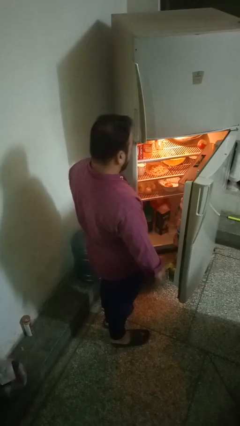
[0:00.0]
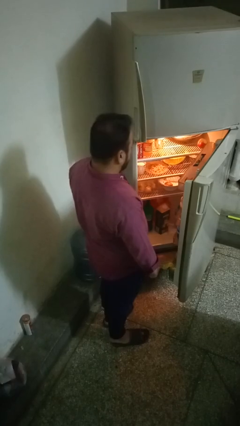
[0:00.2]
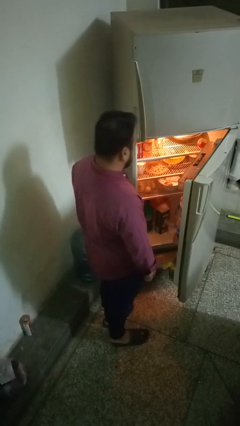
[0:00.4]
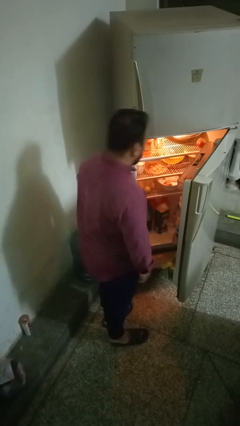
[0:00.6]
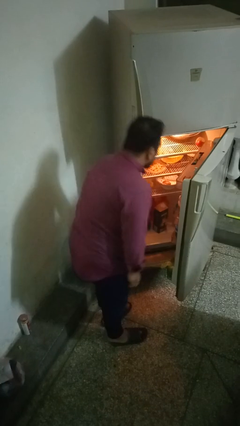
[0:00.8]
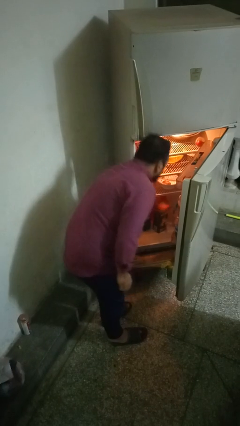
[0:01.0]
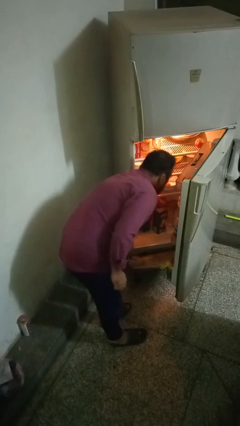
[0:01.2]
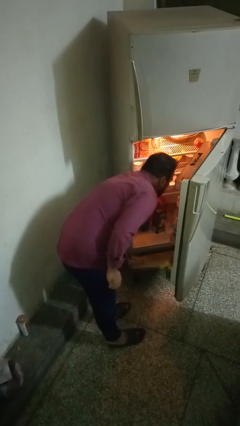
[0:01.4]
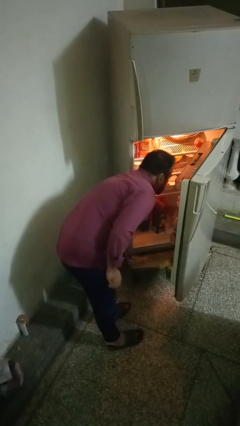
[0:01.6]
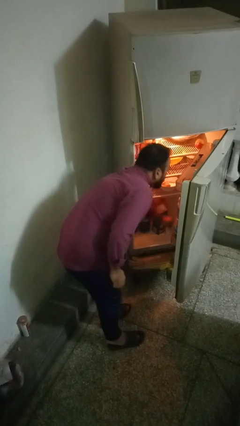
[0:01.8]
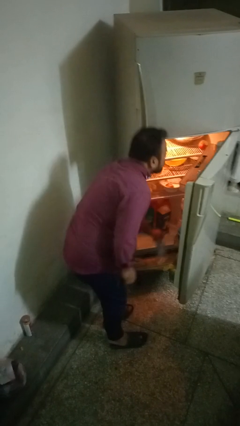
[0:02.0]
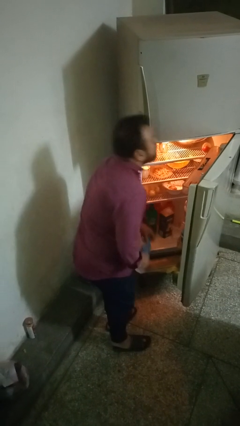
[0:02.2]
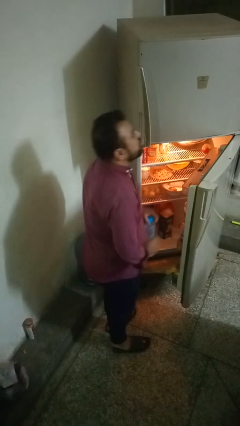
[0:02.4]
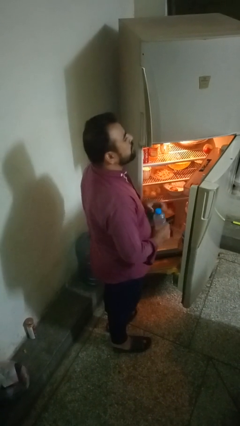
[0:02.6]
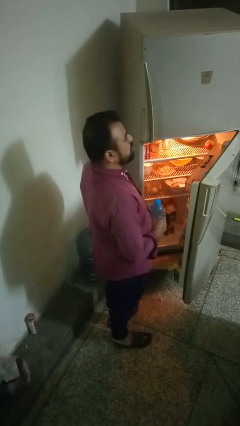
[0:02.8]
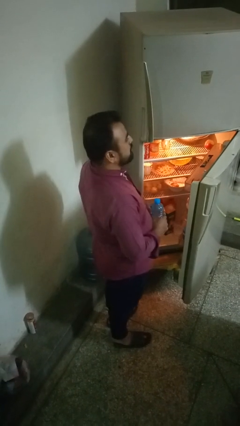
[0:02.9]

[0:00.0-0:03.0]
person takes object from refrigerator

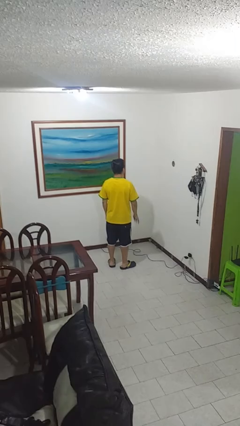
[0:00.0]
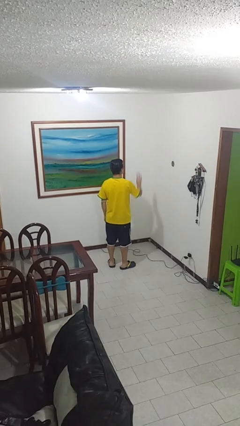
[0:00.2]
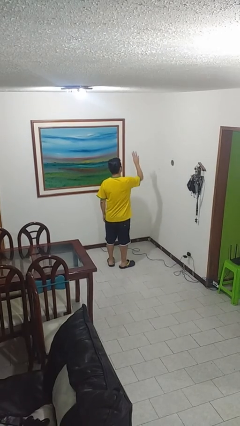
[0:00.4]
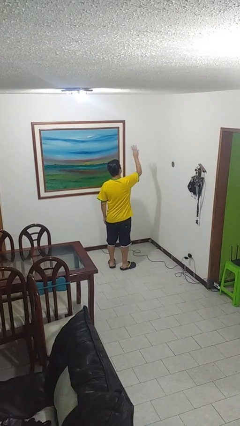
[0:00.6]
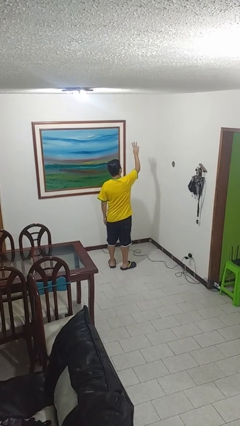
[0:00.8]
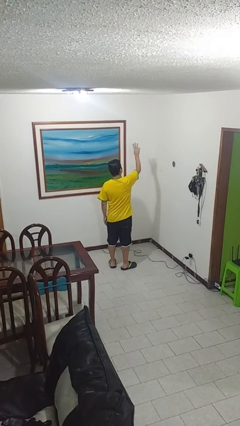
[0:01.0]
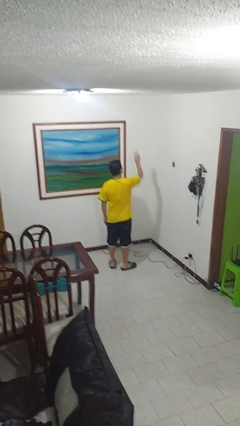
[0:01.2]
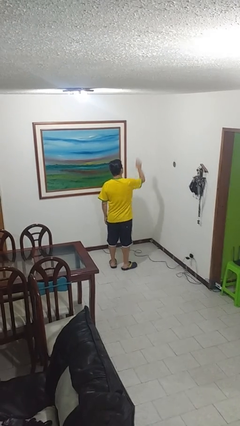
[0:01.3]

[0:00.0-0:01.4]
person gestures number three

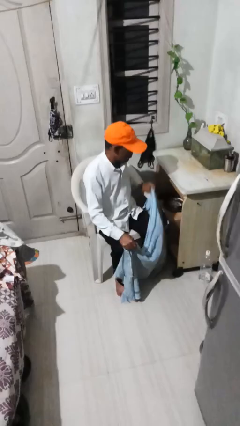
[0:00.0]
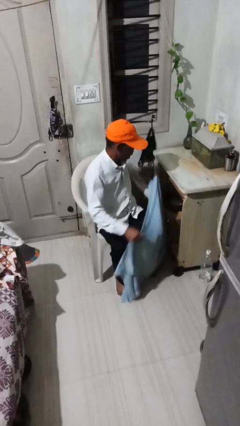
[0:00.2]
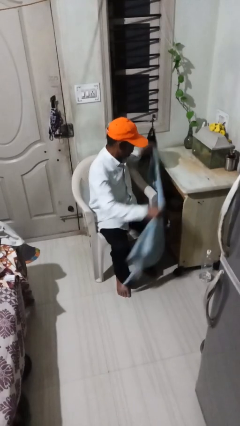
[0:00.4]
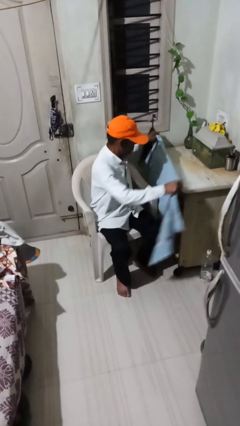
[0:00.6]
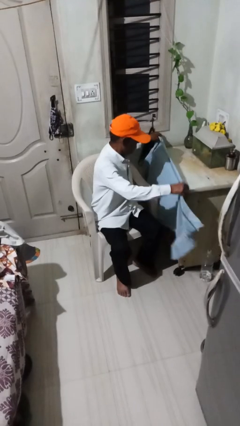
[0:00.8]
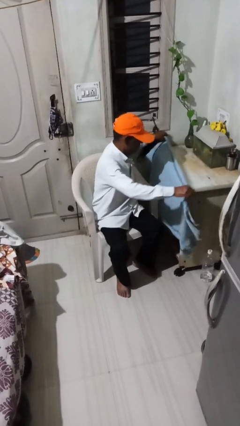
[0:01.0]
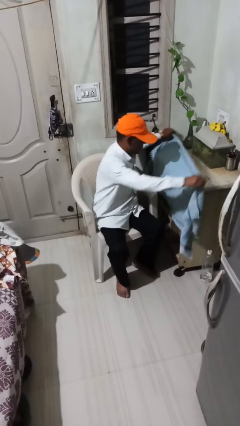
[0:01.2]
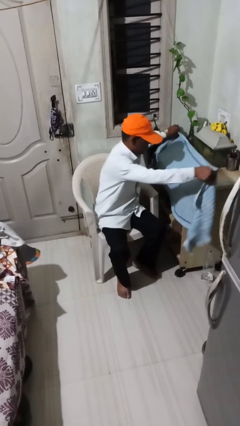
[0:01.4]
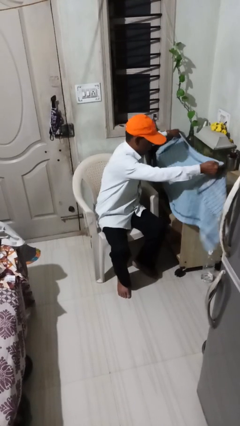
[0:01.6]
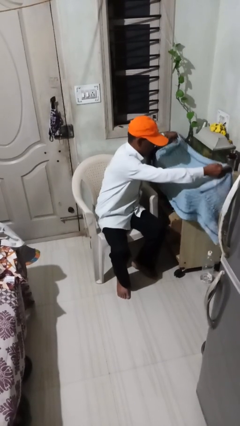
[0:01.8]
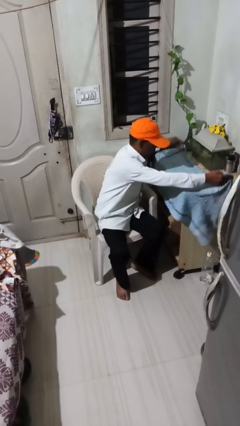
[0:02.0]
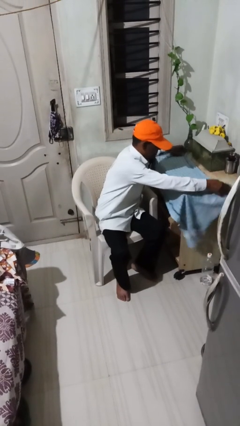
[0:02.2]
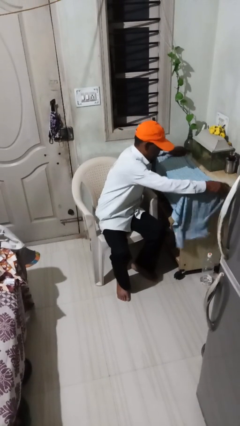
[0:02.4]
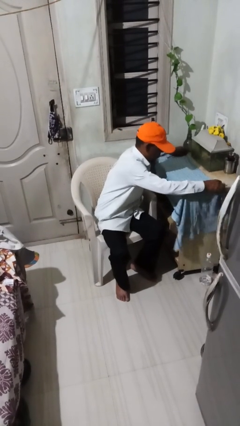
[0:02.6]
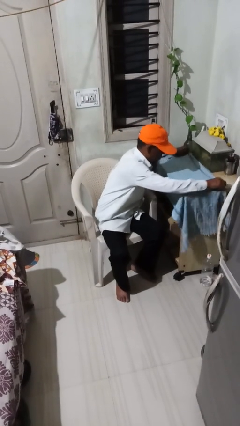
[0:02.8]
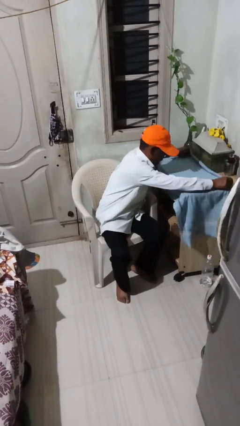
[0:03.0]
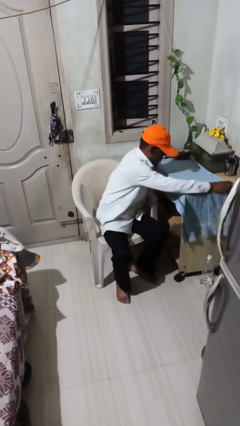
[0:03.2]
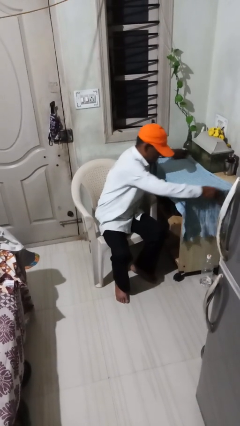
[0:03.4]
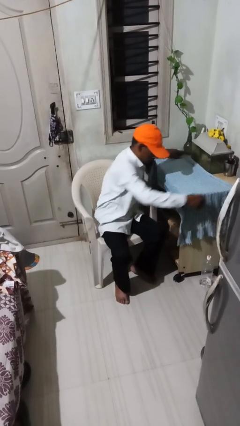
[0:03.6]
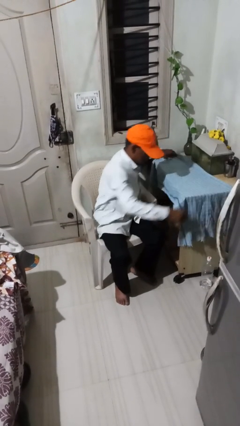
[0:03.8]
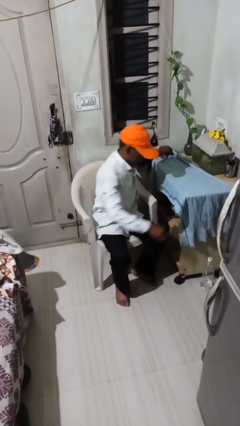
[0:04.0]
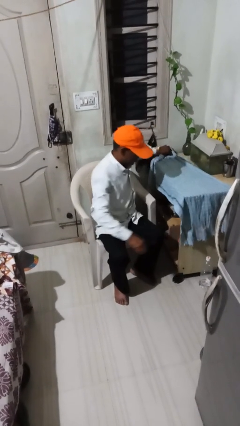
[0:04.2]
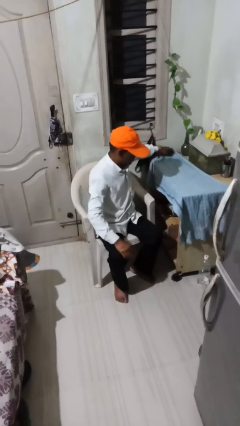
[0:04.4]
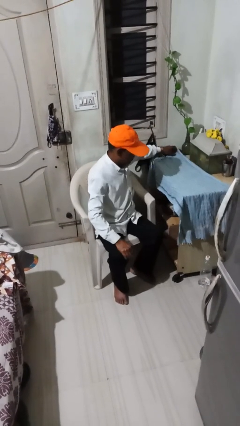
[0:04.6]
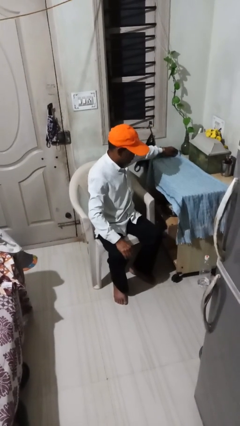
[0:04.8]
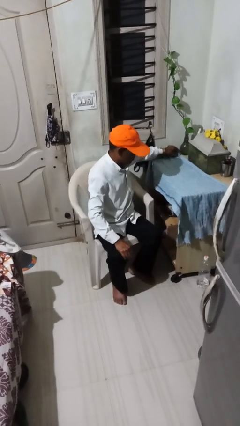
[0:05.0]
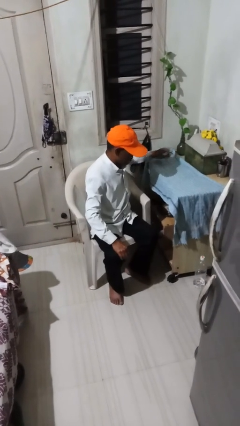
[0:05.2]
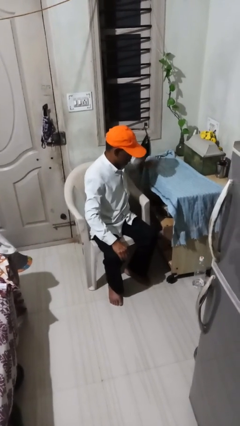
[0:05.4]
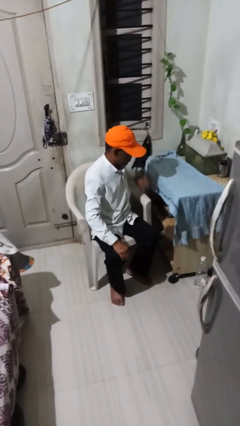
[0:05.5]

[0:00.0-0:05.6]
person spreads tablecloth

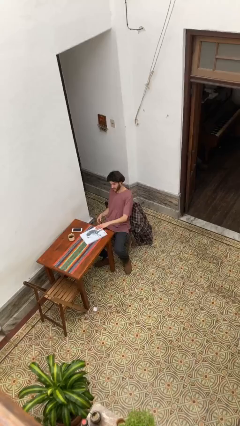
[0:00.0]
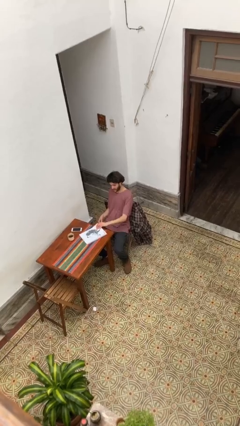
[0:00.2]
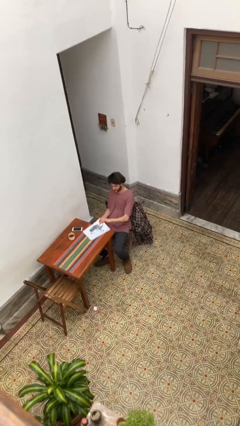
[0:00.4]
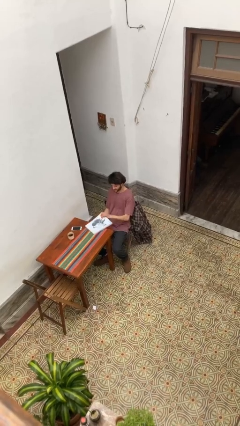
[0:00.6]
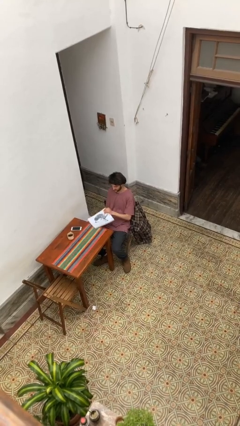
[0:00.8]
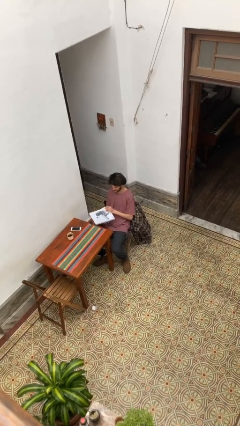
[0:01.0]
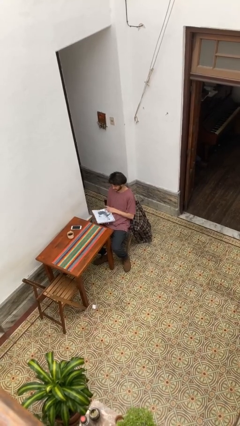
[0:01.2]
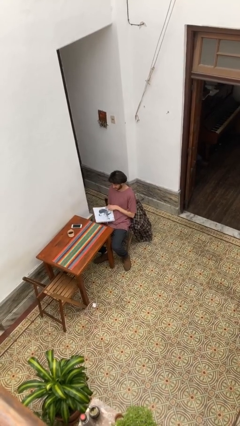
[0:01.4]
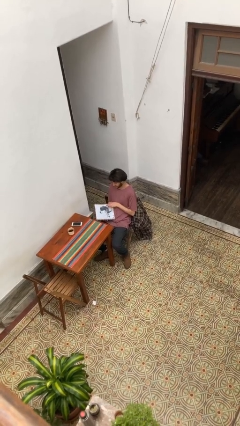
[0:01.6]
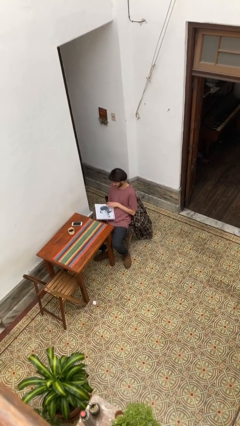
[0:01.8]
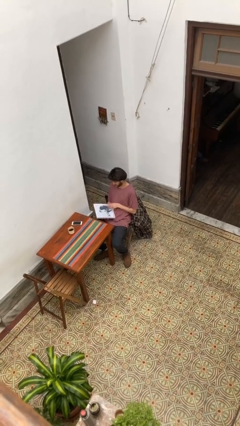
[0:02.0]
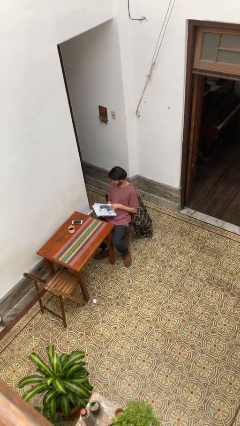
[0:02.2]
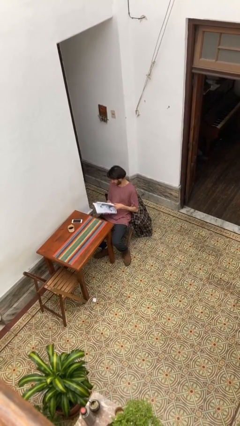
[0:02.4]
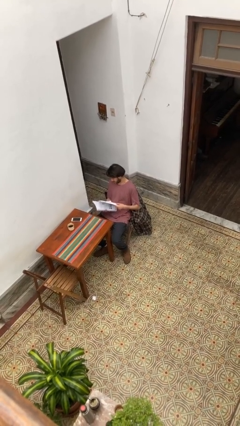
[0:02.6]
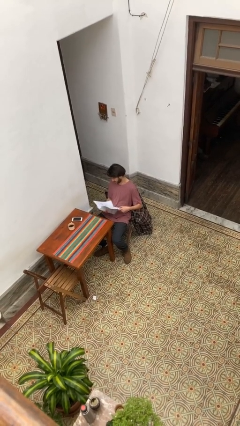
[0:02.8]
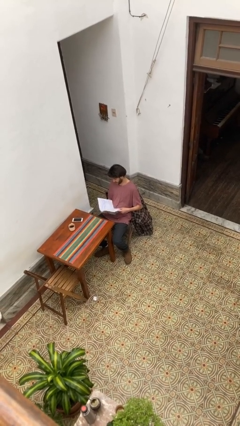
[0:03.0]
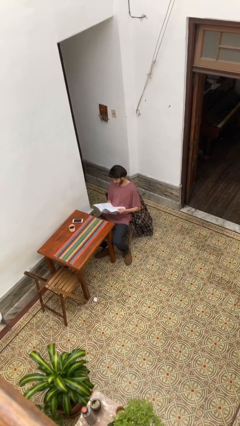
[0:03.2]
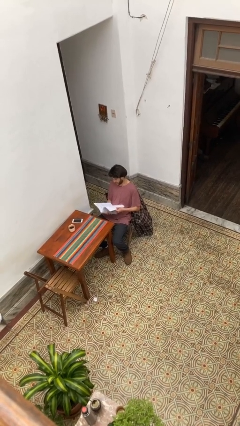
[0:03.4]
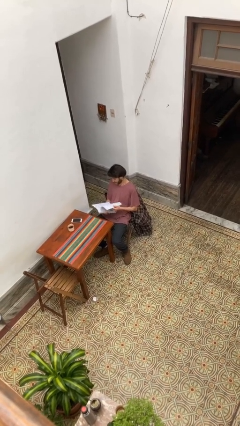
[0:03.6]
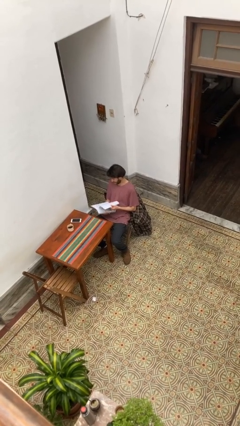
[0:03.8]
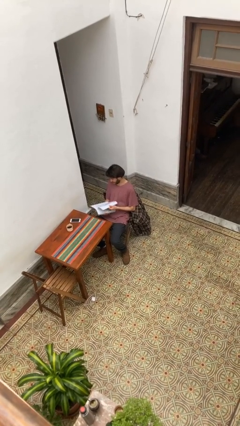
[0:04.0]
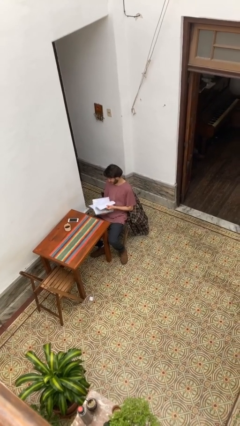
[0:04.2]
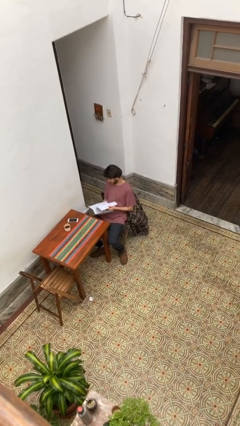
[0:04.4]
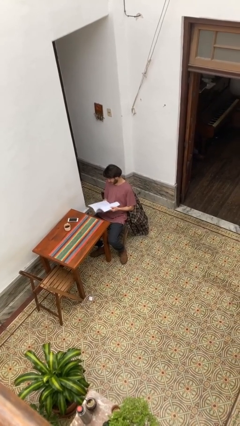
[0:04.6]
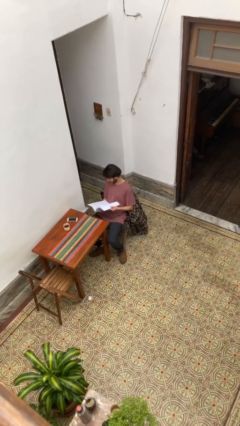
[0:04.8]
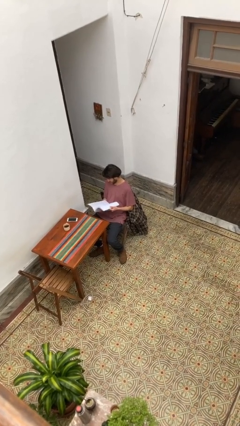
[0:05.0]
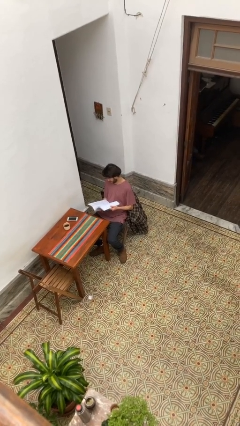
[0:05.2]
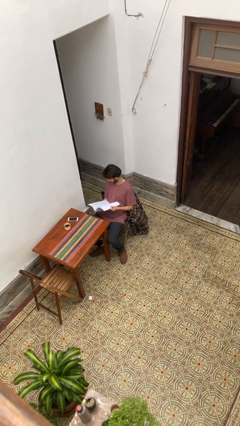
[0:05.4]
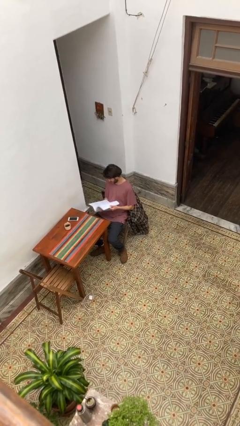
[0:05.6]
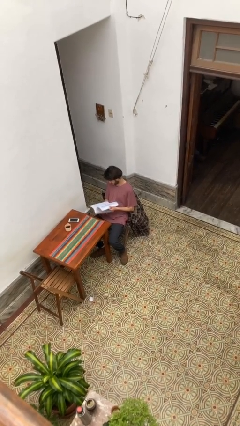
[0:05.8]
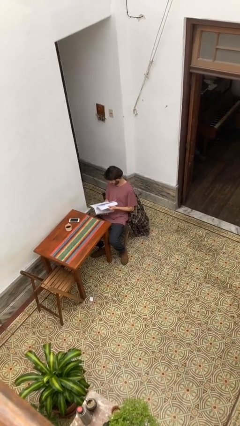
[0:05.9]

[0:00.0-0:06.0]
person reads document

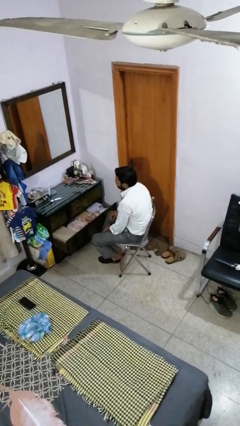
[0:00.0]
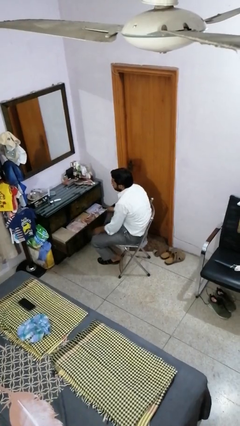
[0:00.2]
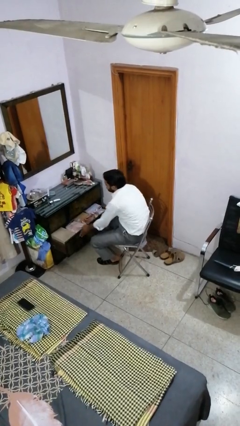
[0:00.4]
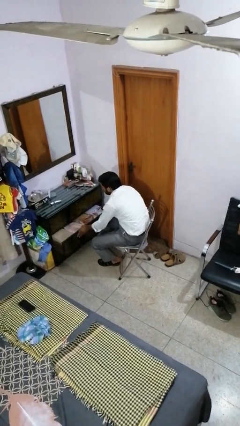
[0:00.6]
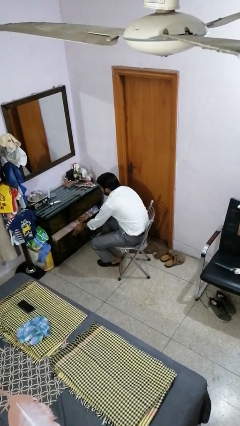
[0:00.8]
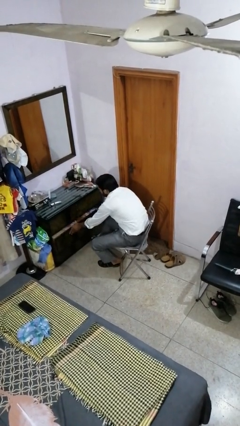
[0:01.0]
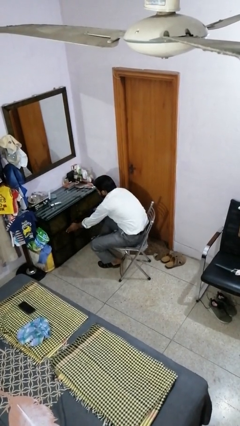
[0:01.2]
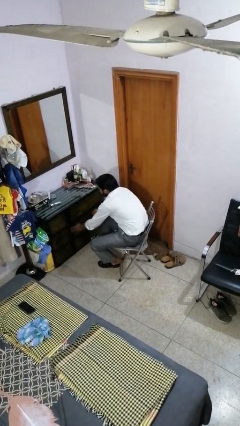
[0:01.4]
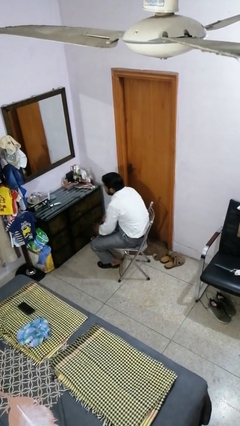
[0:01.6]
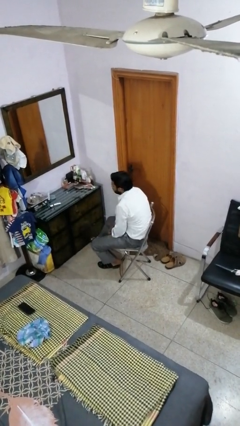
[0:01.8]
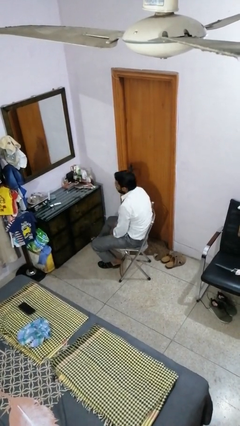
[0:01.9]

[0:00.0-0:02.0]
person closes dresser drawer
